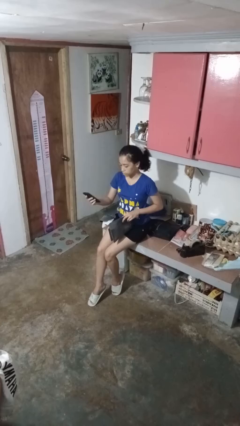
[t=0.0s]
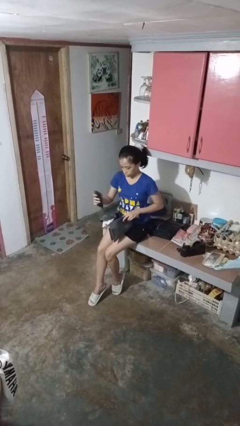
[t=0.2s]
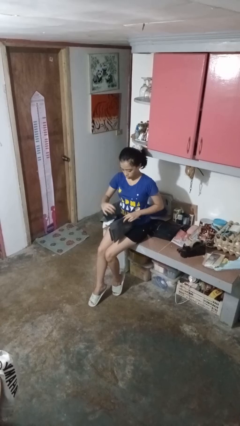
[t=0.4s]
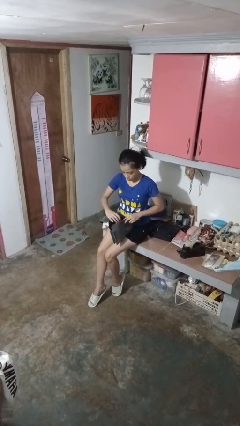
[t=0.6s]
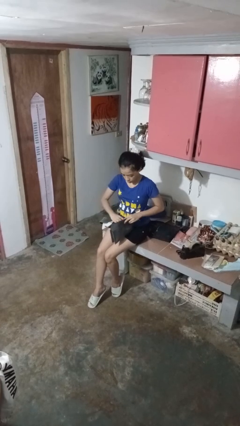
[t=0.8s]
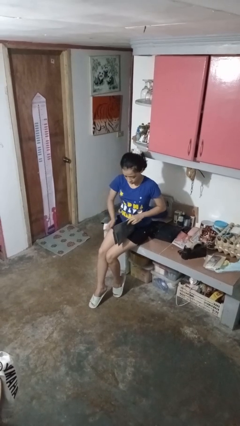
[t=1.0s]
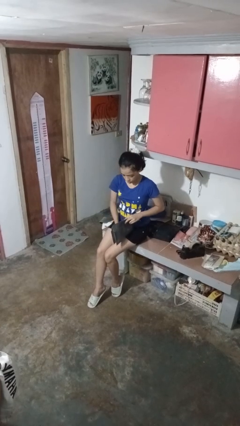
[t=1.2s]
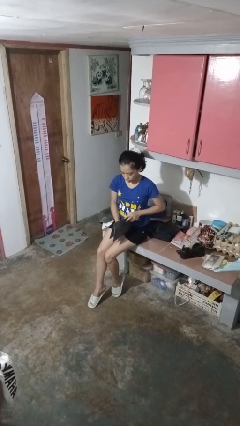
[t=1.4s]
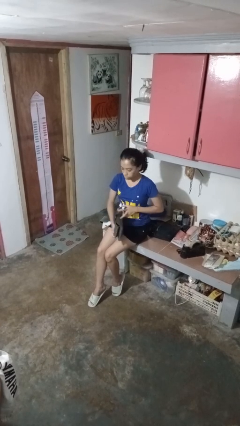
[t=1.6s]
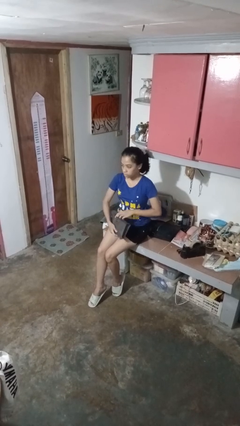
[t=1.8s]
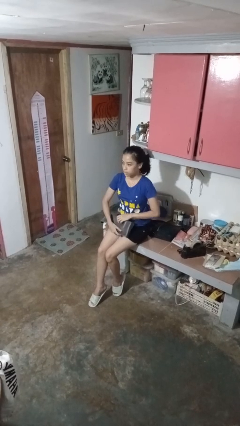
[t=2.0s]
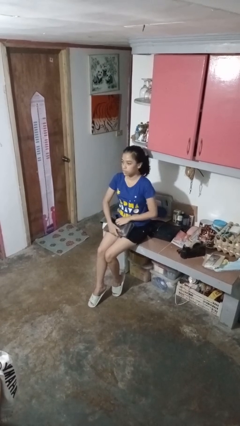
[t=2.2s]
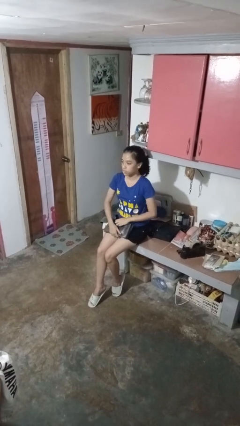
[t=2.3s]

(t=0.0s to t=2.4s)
person puts object into purse

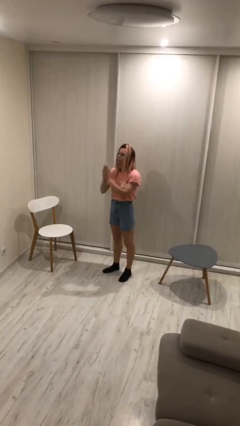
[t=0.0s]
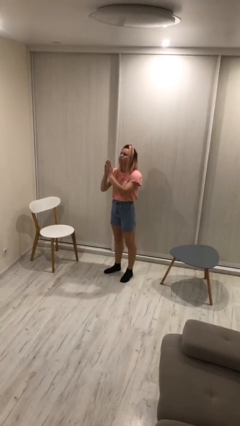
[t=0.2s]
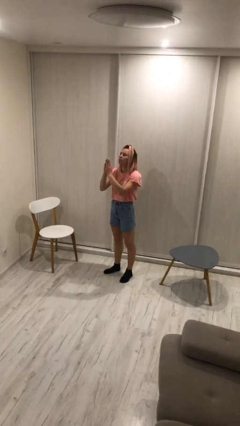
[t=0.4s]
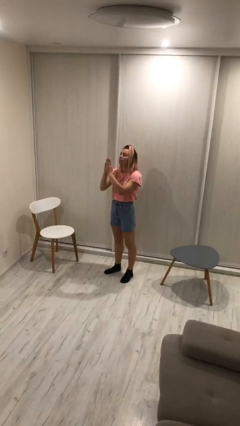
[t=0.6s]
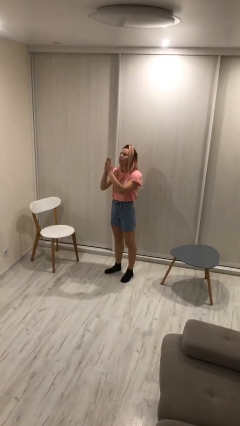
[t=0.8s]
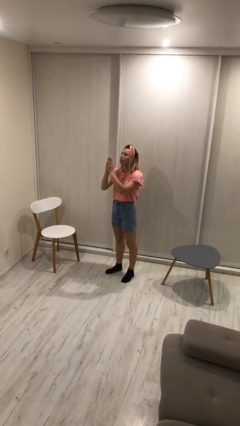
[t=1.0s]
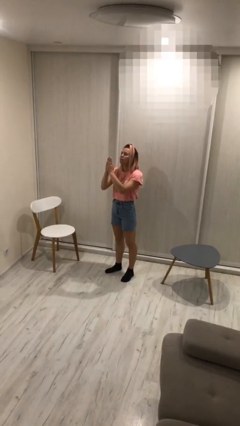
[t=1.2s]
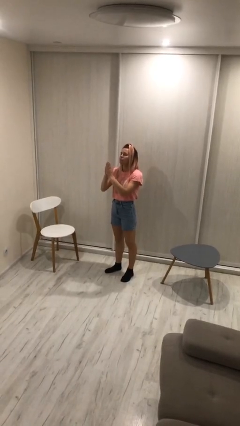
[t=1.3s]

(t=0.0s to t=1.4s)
person prays

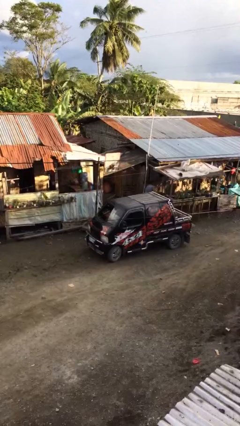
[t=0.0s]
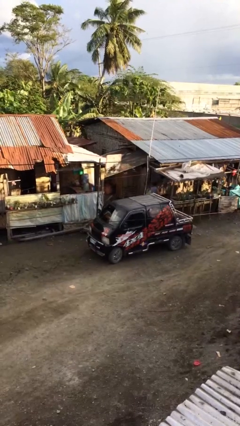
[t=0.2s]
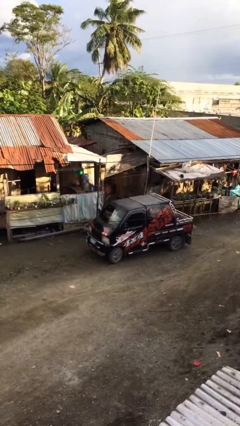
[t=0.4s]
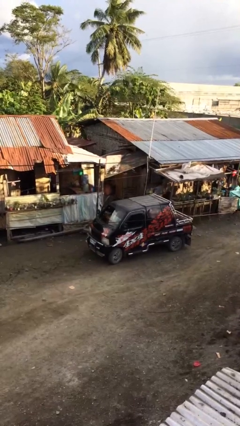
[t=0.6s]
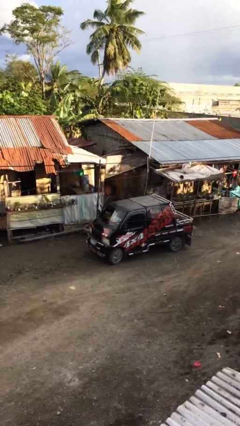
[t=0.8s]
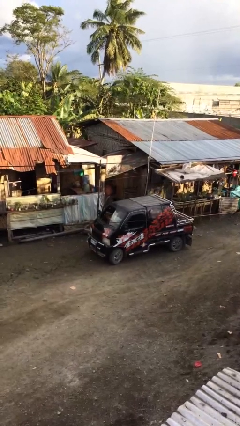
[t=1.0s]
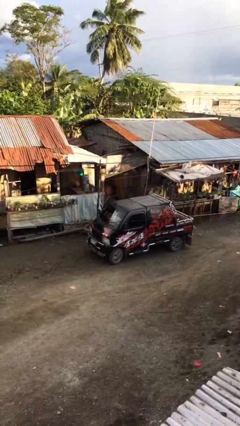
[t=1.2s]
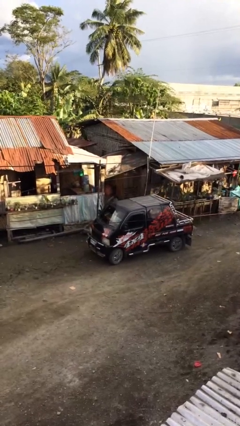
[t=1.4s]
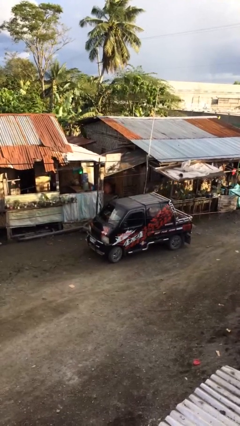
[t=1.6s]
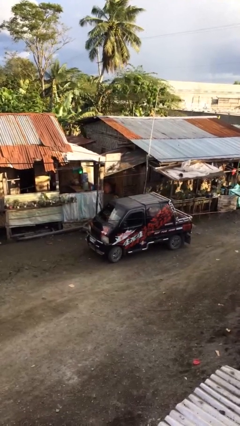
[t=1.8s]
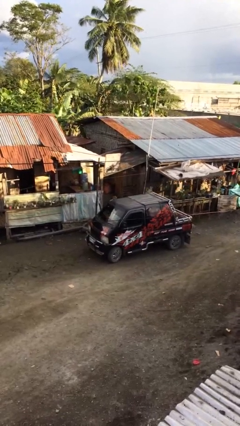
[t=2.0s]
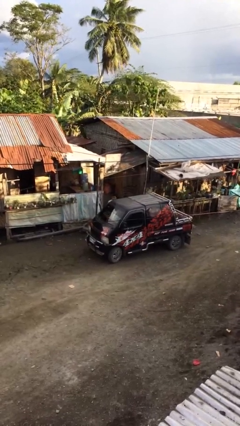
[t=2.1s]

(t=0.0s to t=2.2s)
person exits car

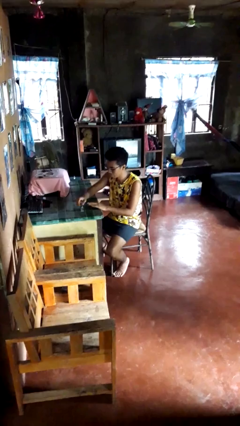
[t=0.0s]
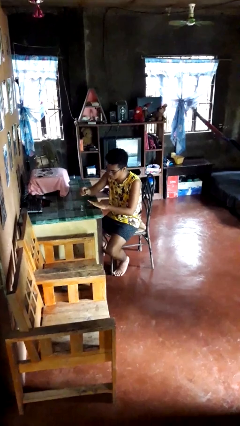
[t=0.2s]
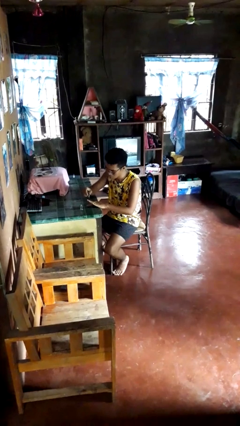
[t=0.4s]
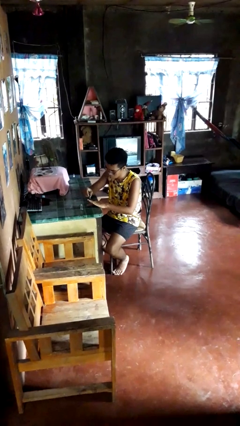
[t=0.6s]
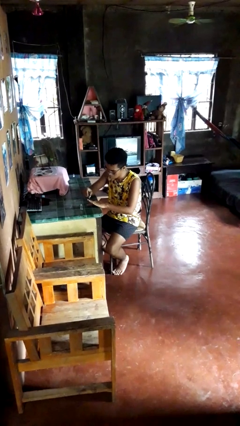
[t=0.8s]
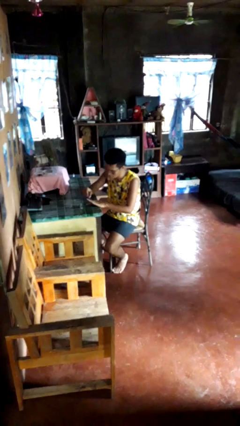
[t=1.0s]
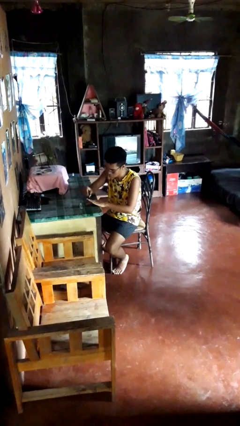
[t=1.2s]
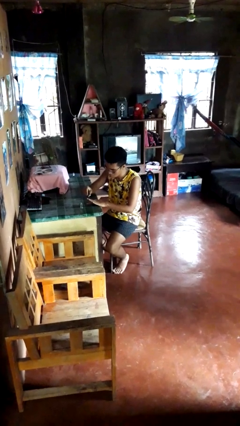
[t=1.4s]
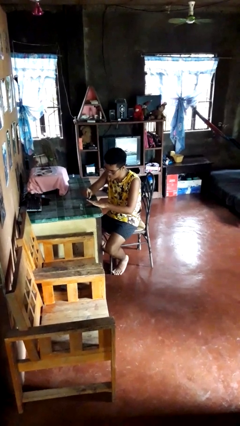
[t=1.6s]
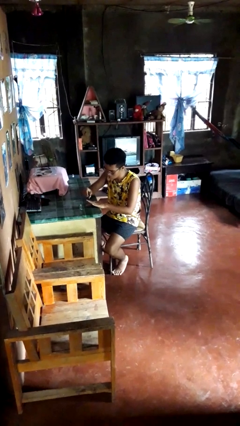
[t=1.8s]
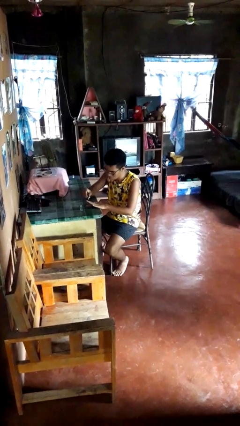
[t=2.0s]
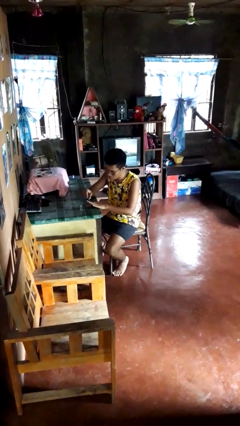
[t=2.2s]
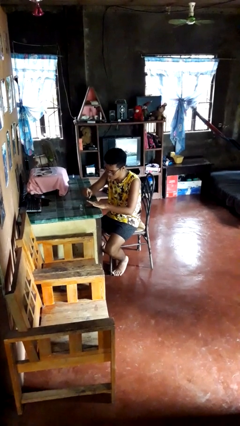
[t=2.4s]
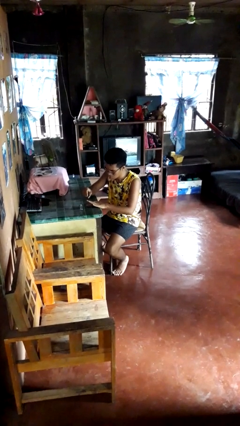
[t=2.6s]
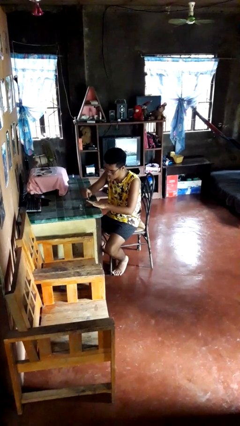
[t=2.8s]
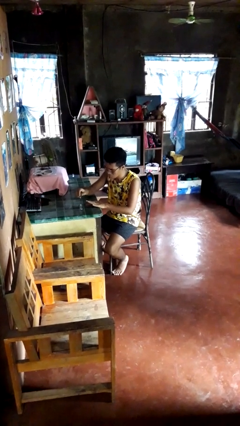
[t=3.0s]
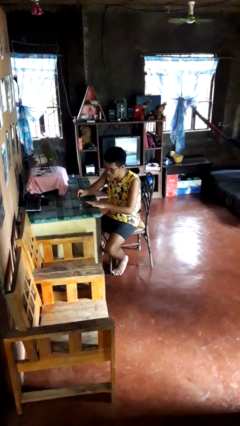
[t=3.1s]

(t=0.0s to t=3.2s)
person paints fingernails

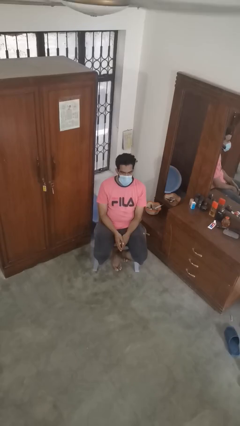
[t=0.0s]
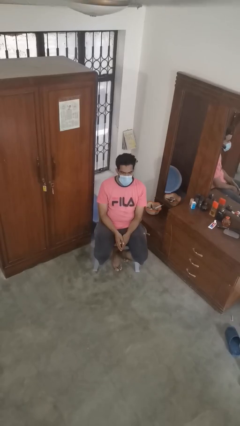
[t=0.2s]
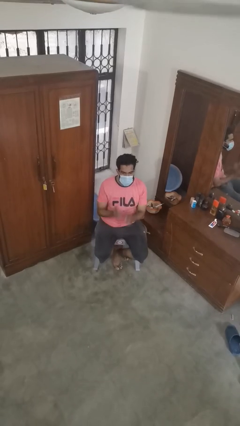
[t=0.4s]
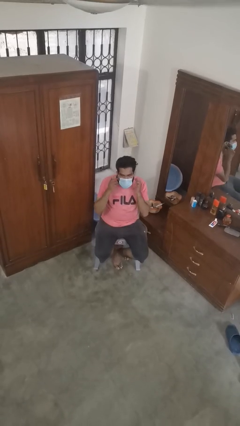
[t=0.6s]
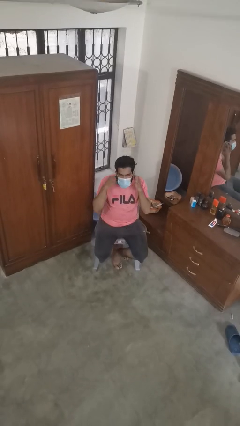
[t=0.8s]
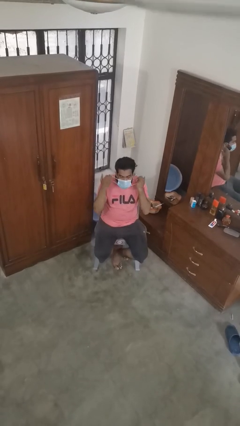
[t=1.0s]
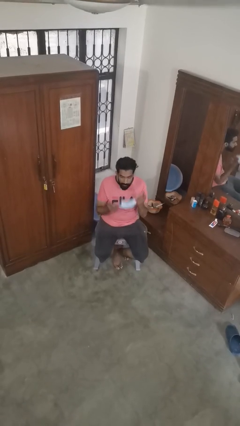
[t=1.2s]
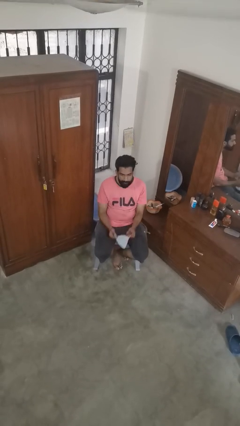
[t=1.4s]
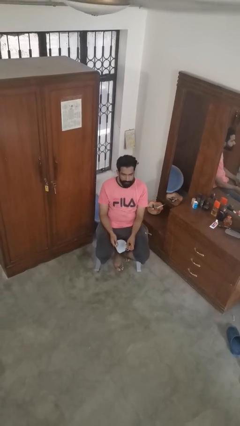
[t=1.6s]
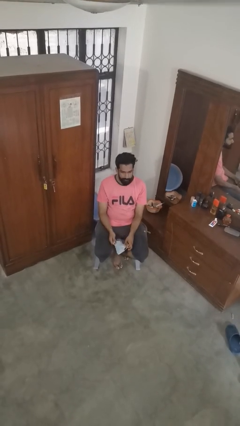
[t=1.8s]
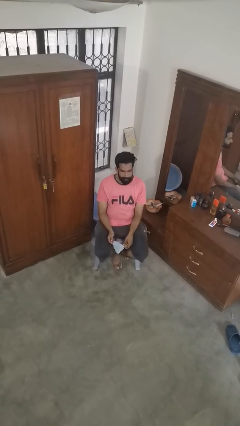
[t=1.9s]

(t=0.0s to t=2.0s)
person takes off facemask

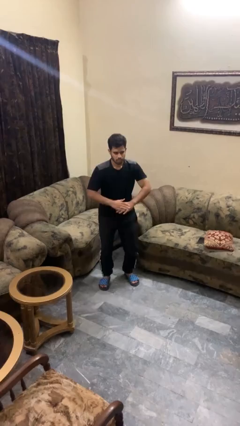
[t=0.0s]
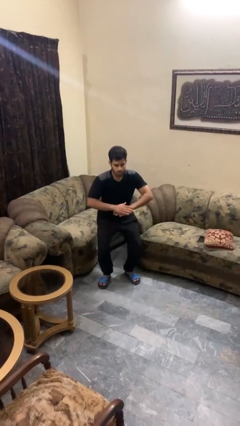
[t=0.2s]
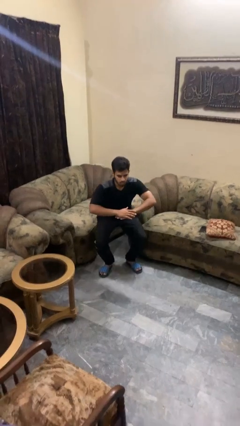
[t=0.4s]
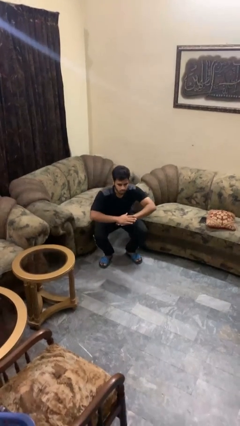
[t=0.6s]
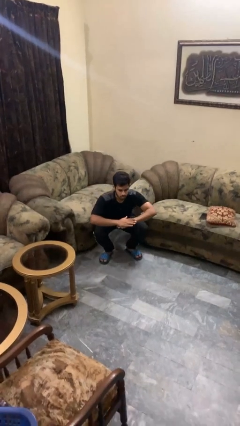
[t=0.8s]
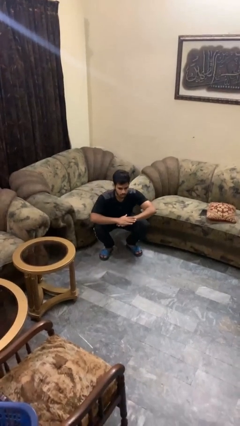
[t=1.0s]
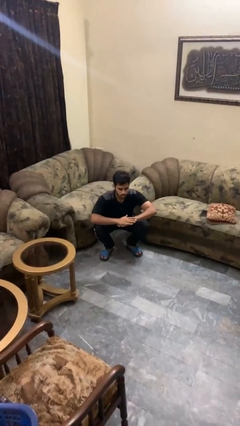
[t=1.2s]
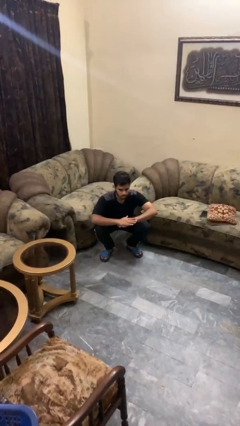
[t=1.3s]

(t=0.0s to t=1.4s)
person squats

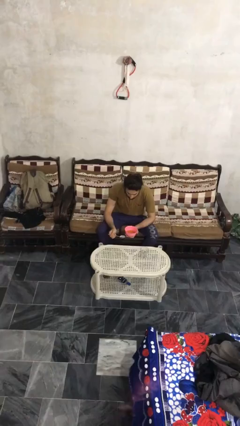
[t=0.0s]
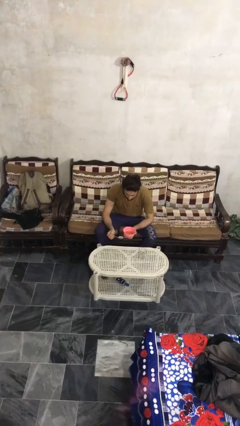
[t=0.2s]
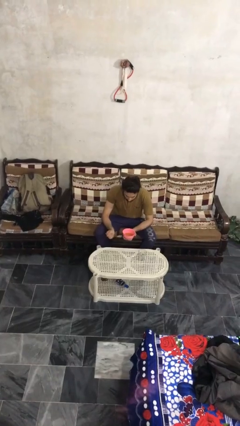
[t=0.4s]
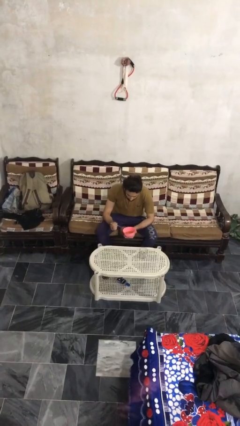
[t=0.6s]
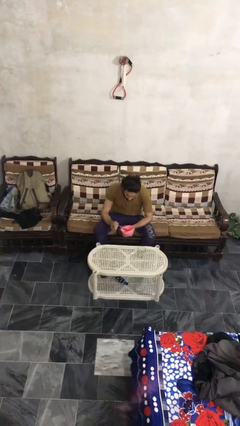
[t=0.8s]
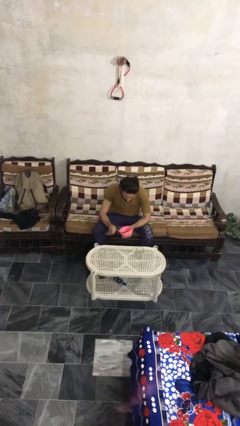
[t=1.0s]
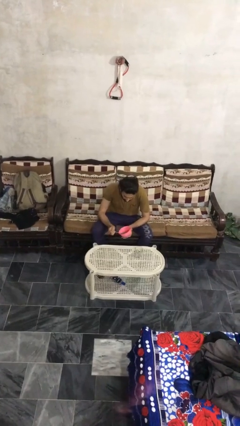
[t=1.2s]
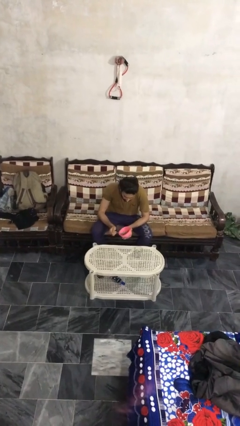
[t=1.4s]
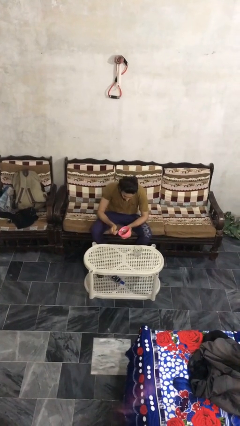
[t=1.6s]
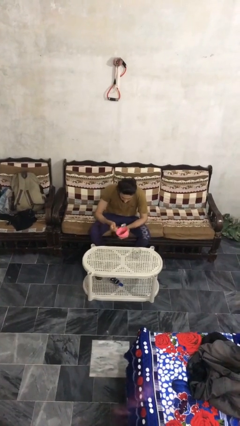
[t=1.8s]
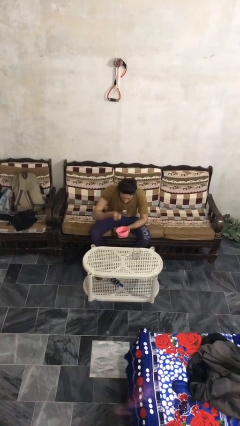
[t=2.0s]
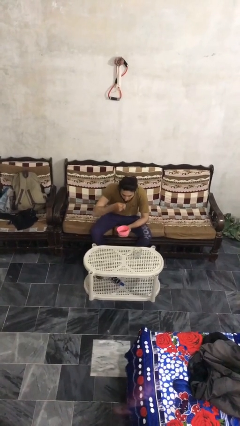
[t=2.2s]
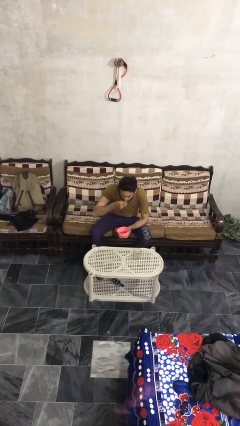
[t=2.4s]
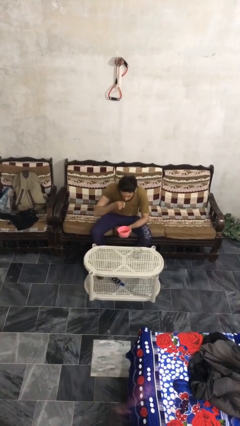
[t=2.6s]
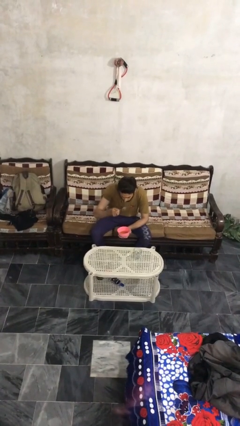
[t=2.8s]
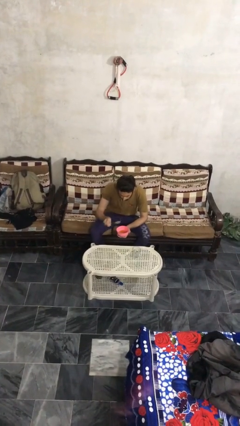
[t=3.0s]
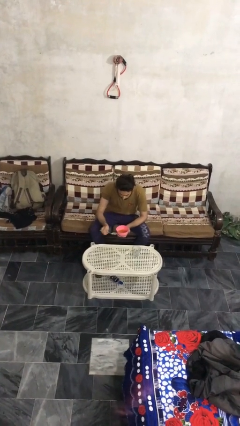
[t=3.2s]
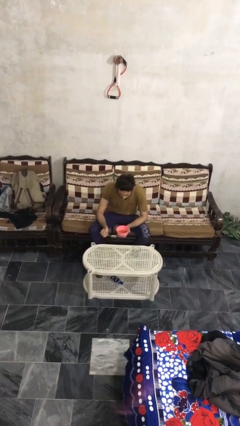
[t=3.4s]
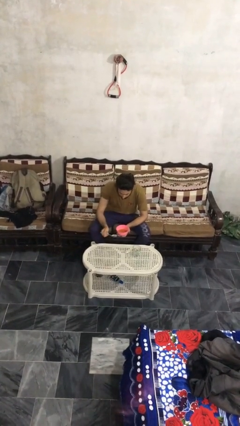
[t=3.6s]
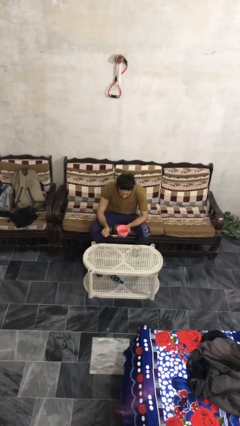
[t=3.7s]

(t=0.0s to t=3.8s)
person eats with utensil

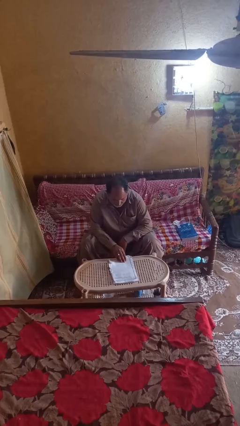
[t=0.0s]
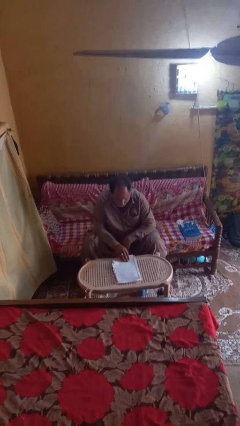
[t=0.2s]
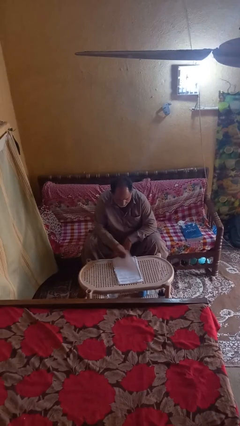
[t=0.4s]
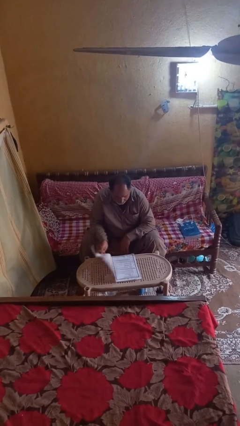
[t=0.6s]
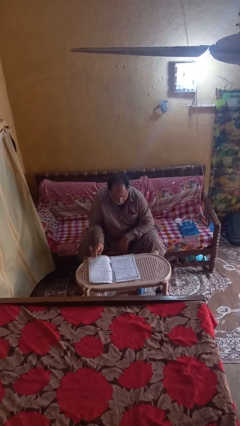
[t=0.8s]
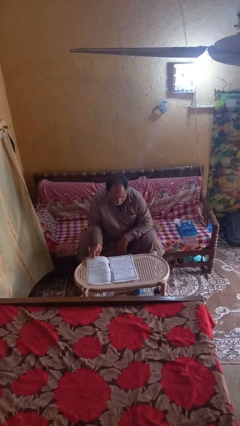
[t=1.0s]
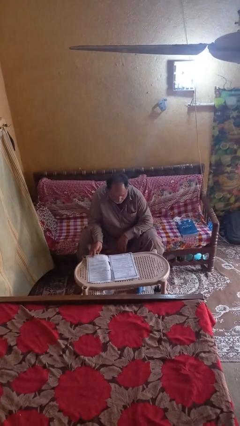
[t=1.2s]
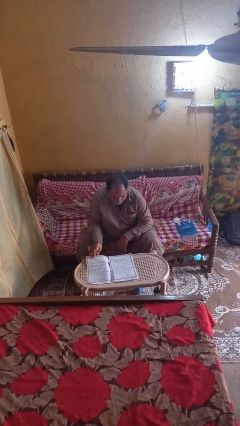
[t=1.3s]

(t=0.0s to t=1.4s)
person reads newspaper
